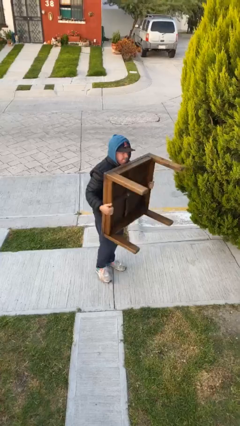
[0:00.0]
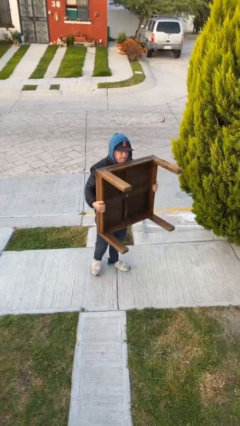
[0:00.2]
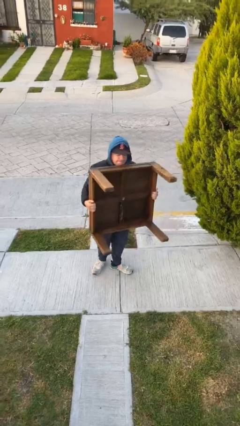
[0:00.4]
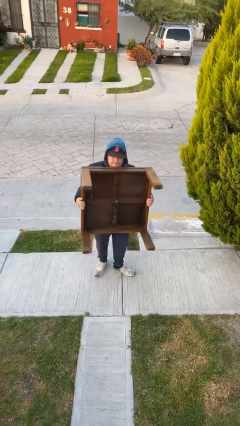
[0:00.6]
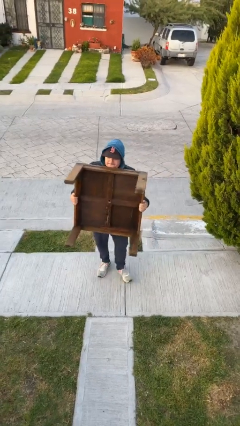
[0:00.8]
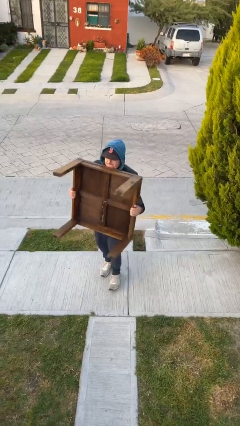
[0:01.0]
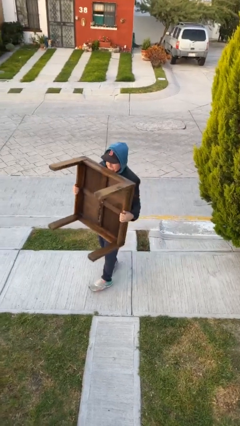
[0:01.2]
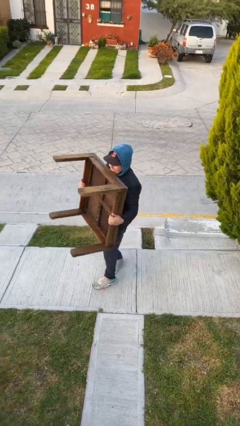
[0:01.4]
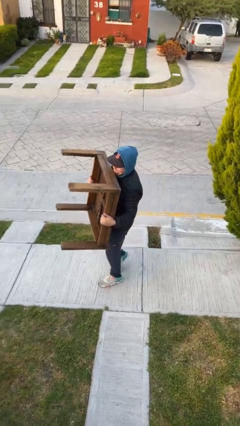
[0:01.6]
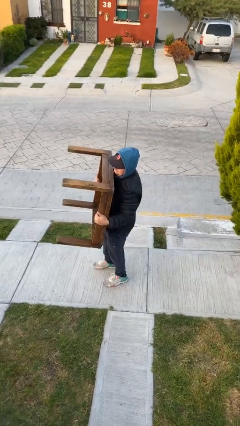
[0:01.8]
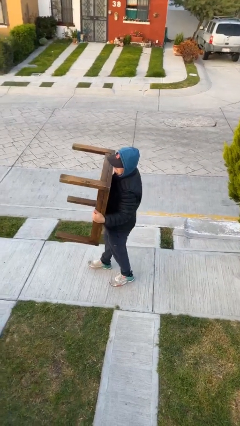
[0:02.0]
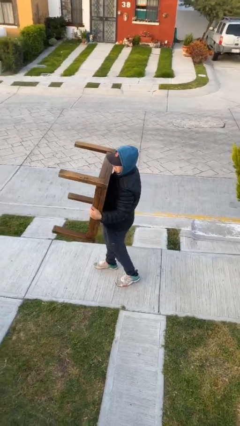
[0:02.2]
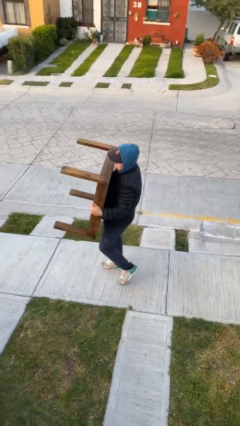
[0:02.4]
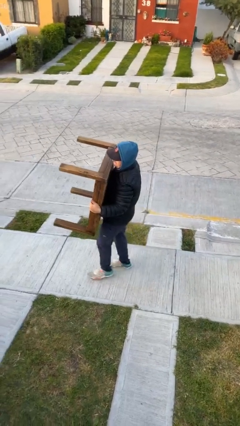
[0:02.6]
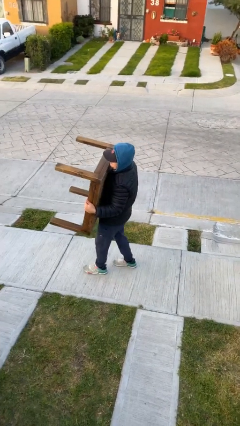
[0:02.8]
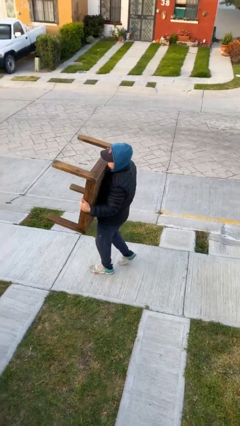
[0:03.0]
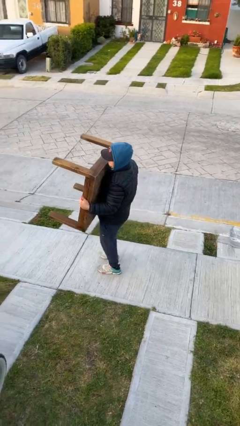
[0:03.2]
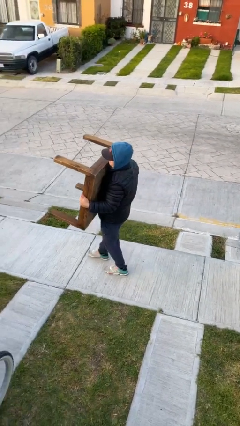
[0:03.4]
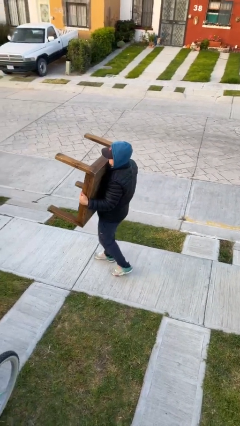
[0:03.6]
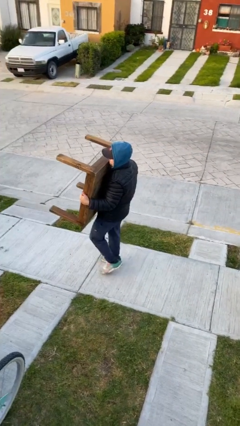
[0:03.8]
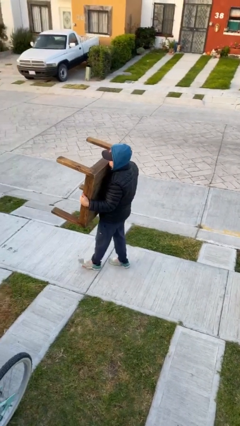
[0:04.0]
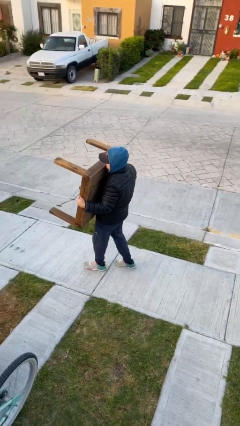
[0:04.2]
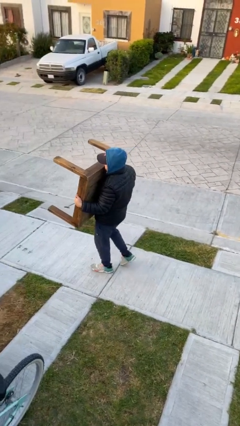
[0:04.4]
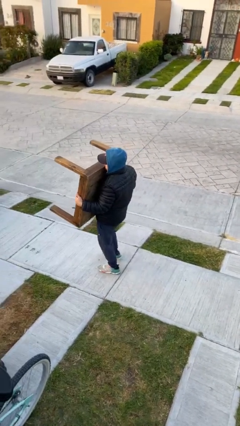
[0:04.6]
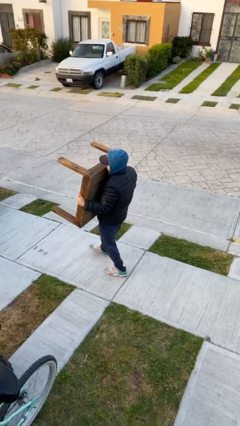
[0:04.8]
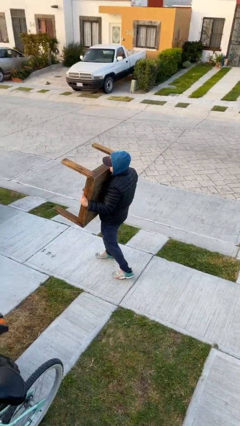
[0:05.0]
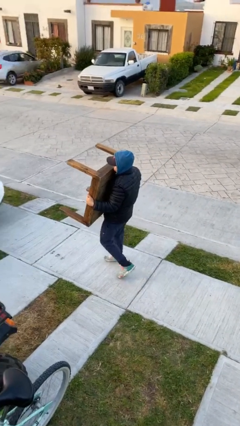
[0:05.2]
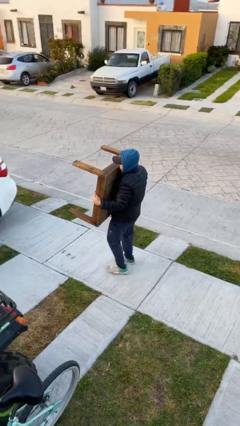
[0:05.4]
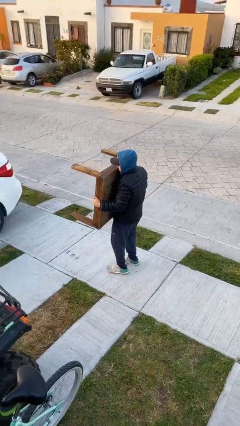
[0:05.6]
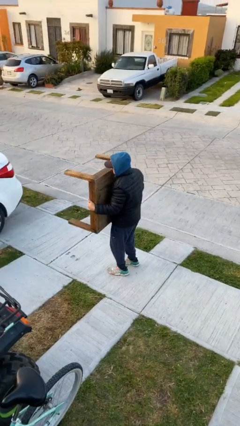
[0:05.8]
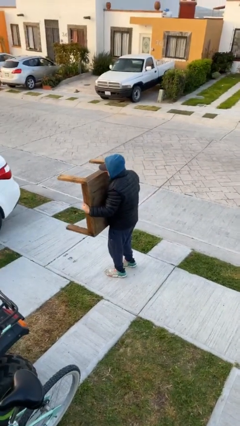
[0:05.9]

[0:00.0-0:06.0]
person carries heavy object

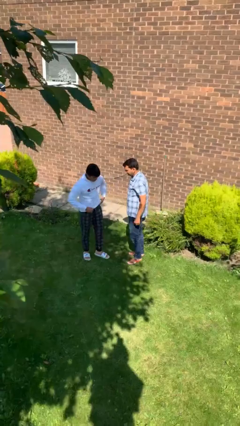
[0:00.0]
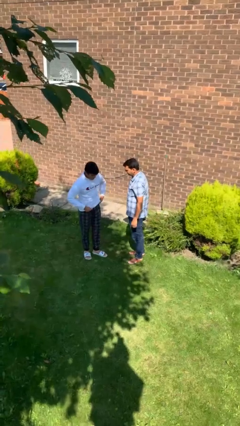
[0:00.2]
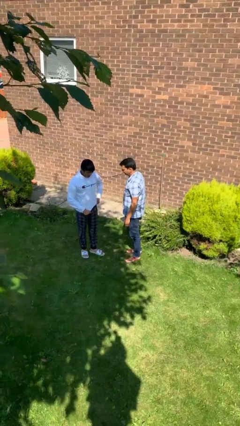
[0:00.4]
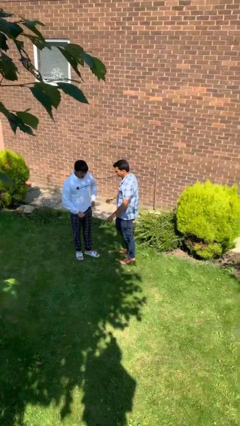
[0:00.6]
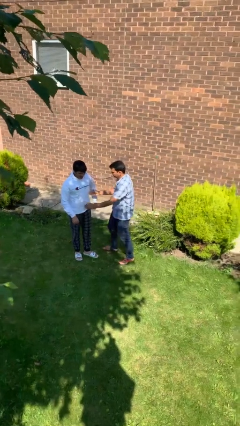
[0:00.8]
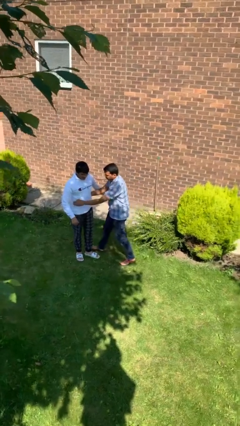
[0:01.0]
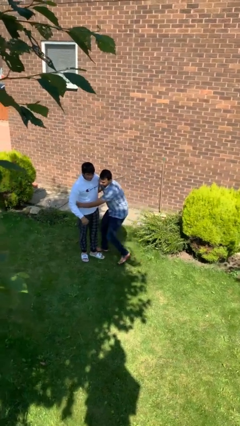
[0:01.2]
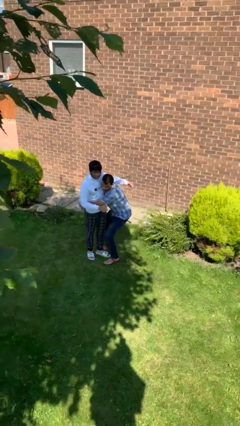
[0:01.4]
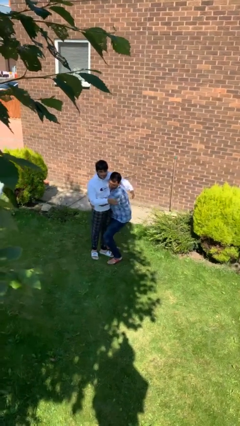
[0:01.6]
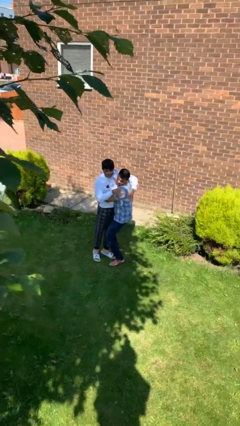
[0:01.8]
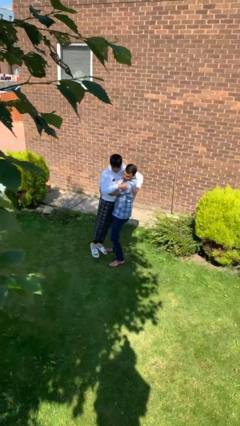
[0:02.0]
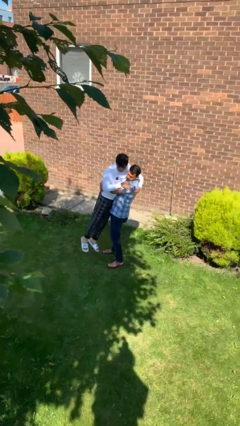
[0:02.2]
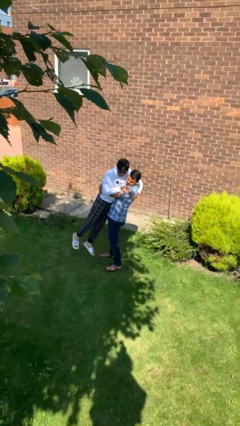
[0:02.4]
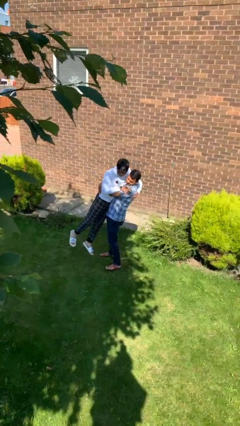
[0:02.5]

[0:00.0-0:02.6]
person picks up person

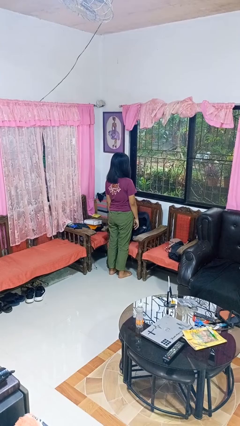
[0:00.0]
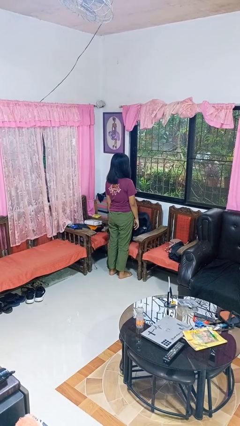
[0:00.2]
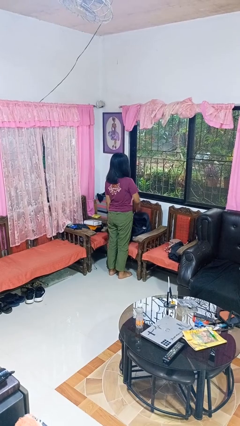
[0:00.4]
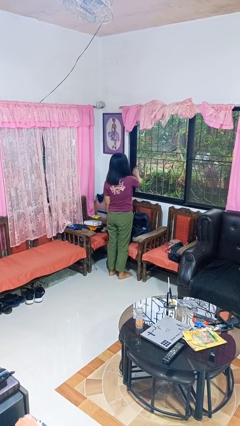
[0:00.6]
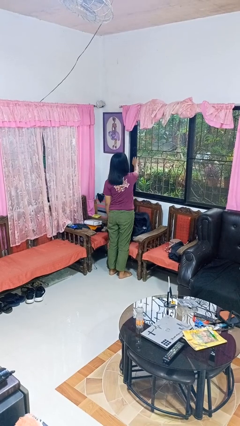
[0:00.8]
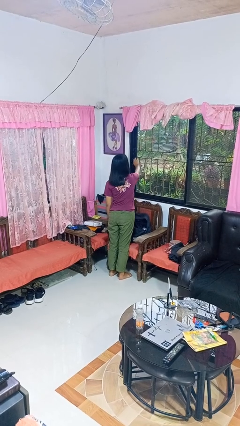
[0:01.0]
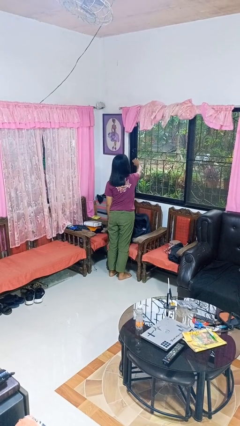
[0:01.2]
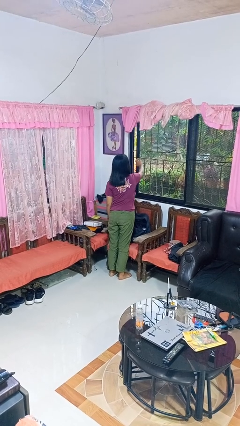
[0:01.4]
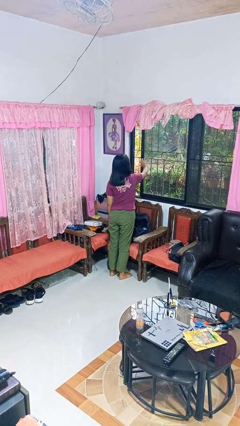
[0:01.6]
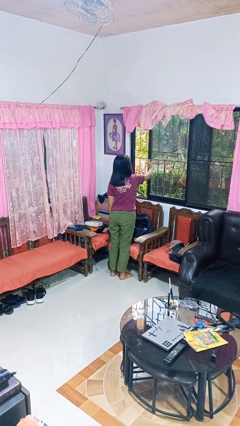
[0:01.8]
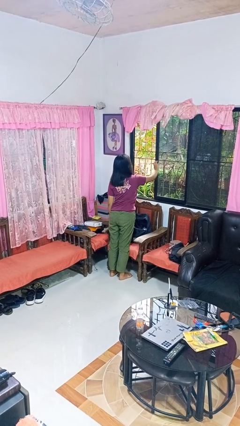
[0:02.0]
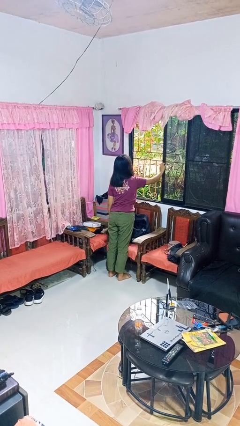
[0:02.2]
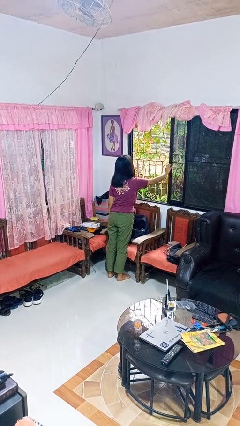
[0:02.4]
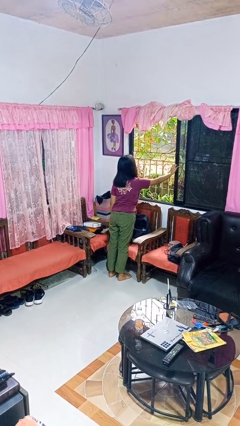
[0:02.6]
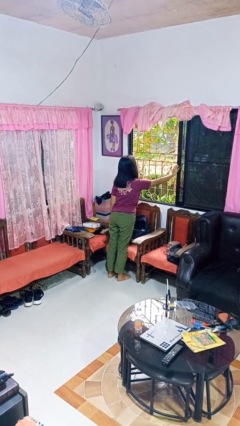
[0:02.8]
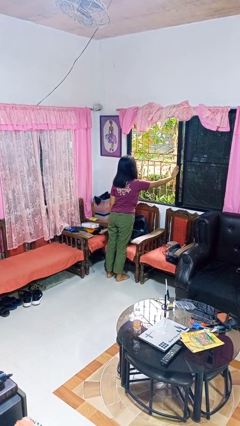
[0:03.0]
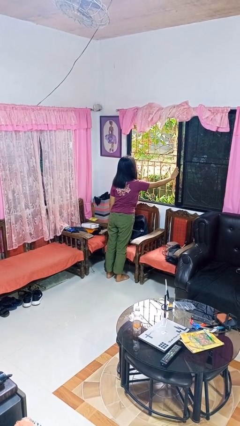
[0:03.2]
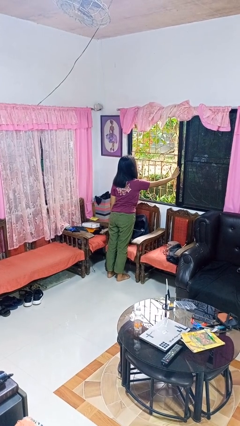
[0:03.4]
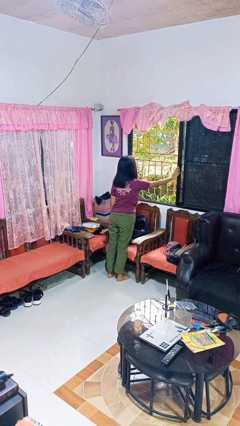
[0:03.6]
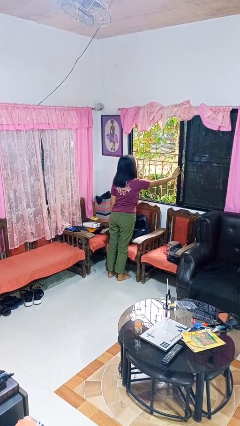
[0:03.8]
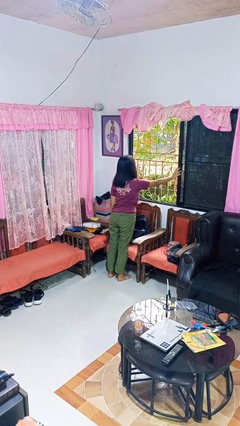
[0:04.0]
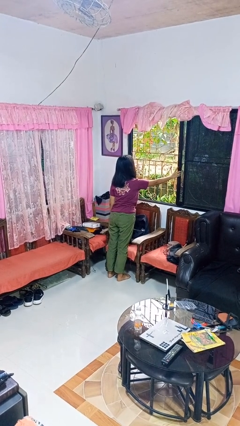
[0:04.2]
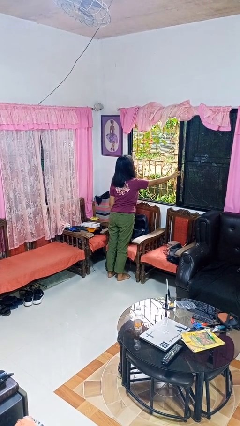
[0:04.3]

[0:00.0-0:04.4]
person opens home window

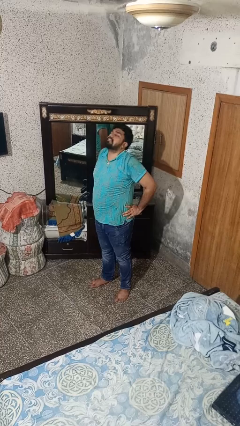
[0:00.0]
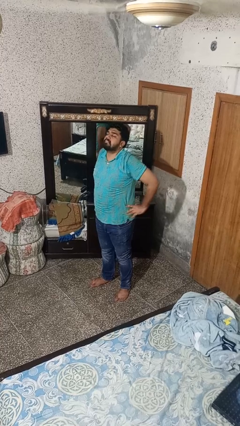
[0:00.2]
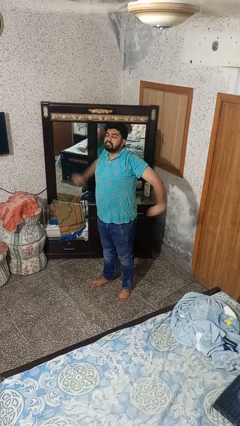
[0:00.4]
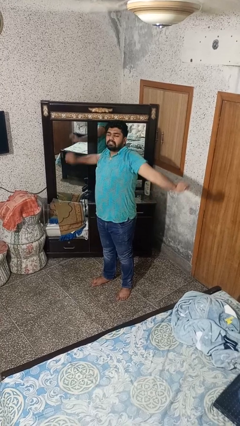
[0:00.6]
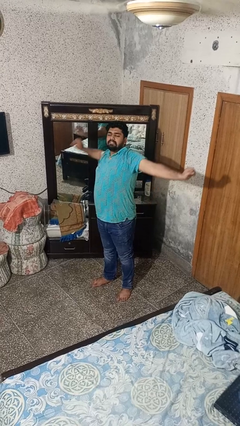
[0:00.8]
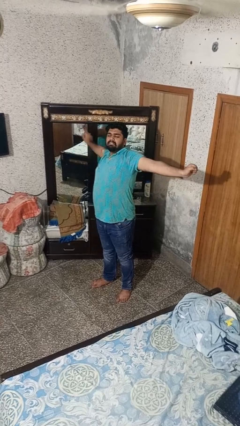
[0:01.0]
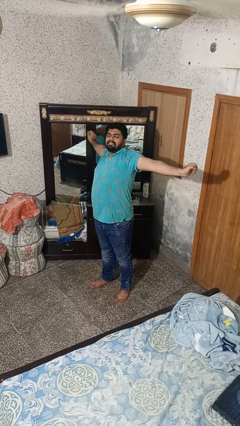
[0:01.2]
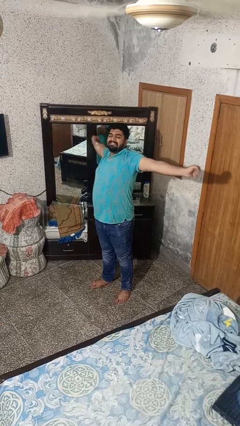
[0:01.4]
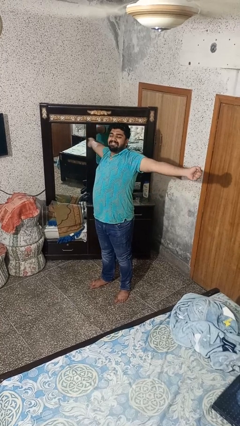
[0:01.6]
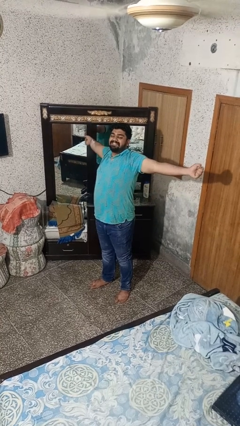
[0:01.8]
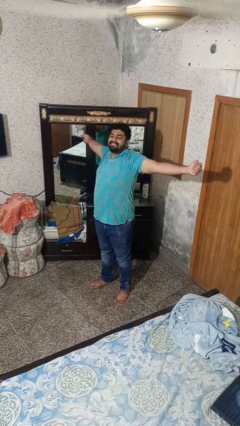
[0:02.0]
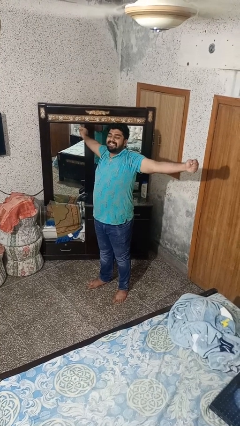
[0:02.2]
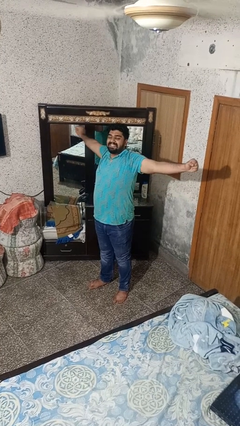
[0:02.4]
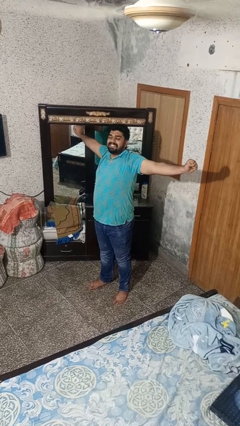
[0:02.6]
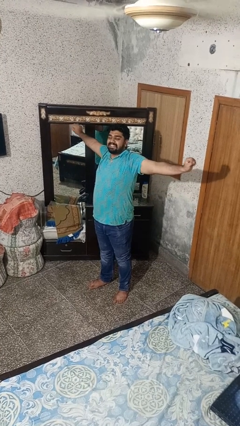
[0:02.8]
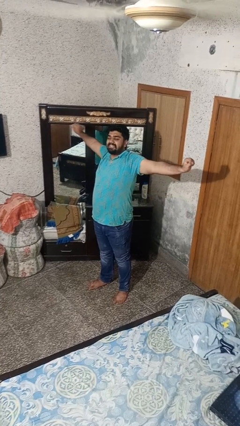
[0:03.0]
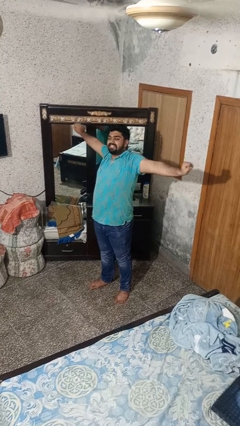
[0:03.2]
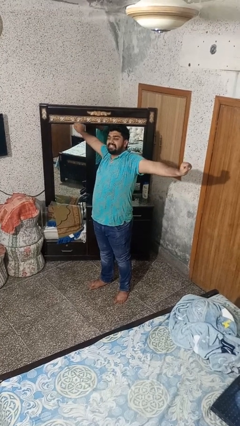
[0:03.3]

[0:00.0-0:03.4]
person stretches arms to side

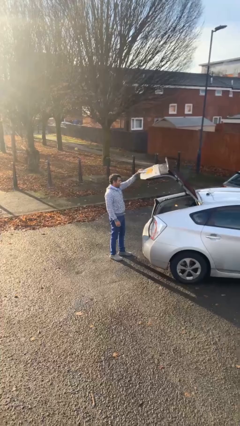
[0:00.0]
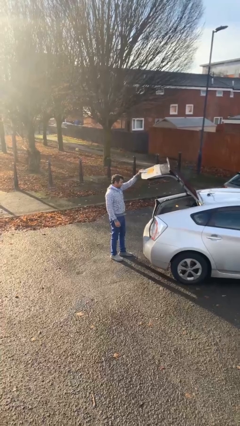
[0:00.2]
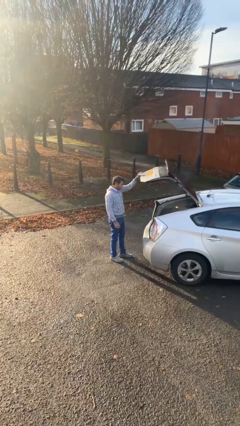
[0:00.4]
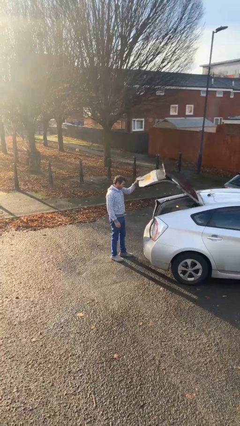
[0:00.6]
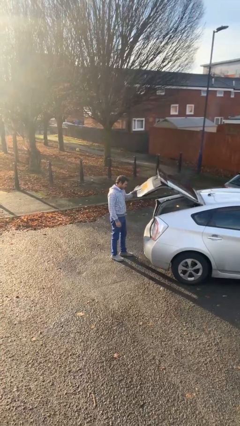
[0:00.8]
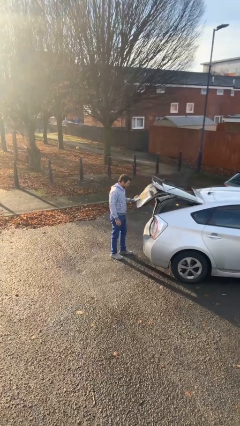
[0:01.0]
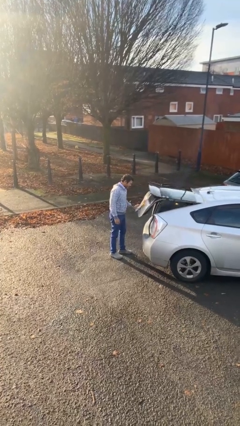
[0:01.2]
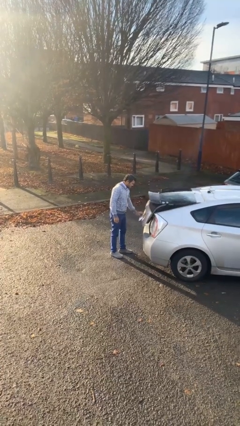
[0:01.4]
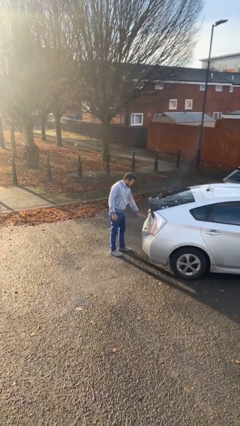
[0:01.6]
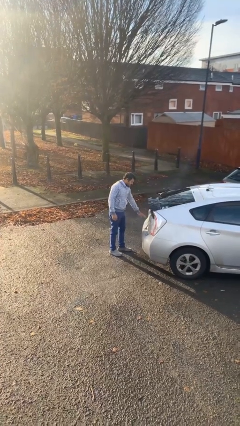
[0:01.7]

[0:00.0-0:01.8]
person closes car trunk
